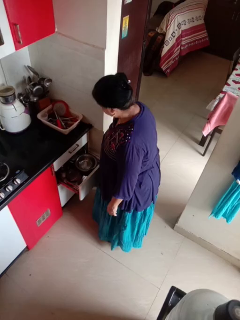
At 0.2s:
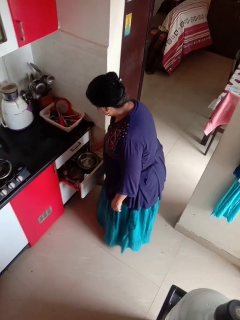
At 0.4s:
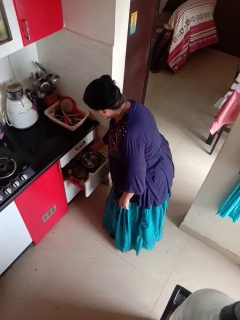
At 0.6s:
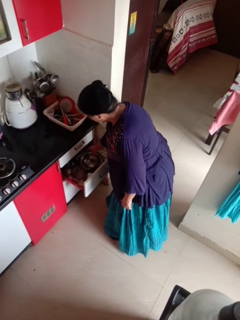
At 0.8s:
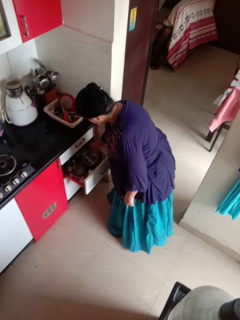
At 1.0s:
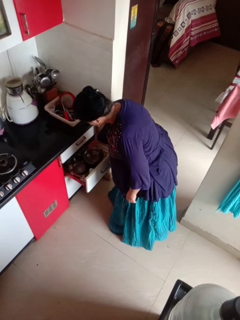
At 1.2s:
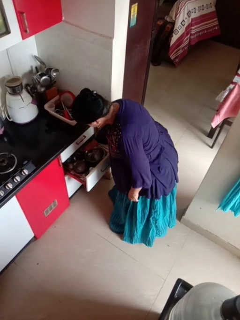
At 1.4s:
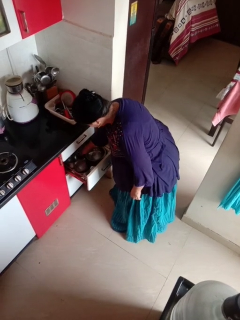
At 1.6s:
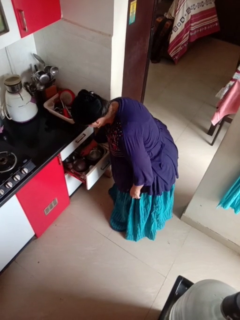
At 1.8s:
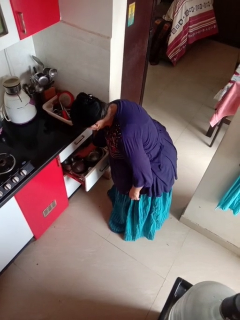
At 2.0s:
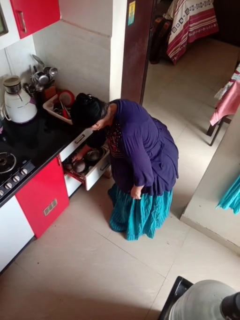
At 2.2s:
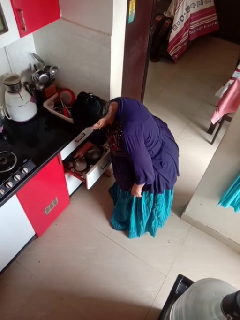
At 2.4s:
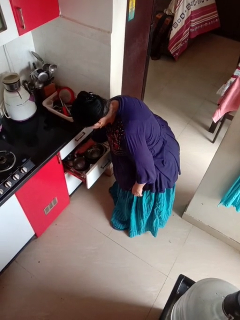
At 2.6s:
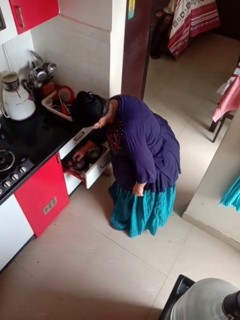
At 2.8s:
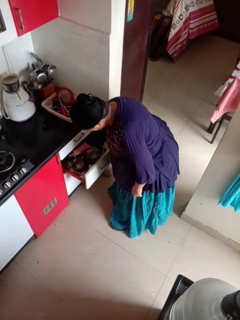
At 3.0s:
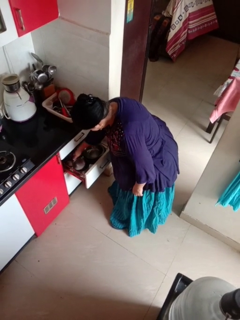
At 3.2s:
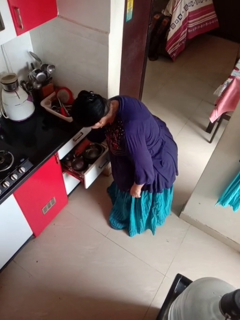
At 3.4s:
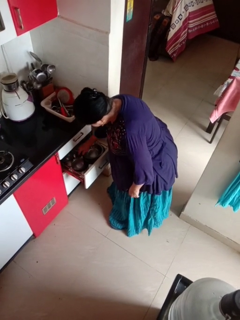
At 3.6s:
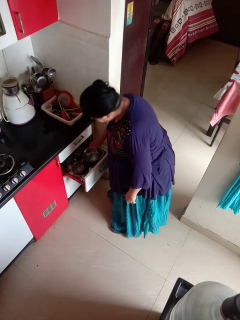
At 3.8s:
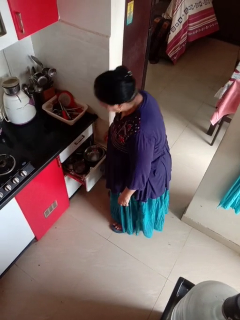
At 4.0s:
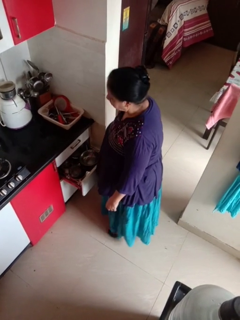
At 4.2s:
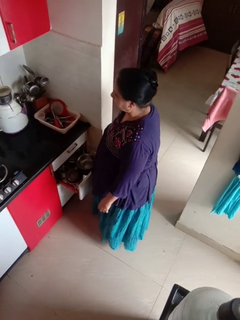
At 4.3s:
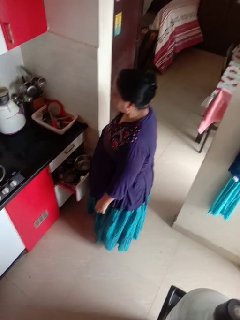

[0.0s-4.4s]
person searches in kitchen drawer

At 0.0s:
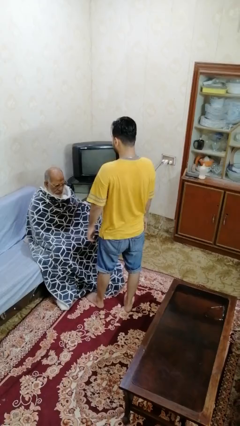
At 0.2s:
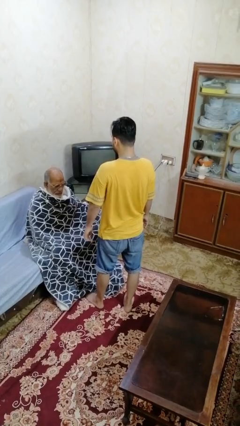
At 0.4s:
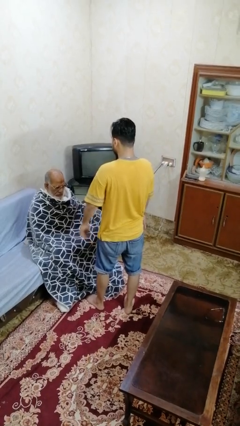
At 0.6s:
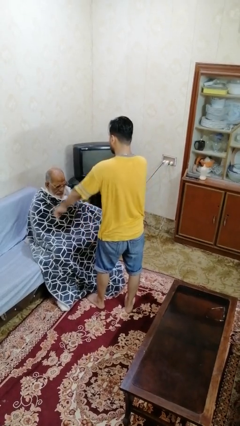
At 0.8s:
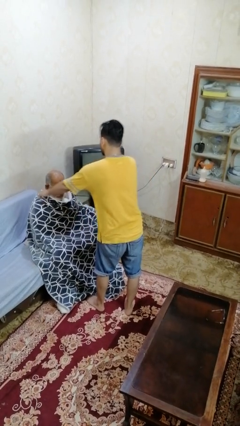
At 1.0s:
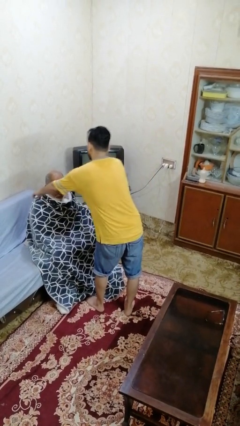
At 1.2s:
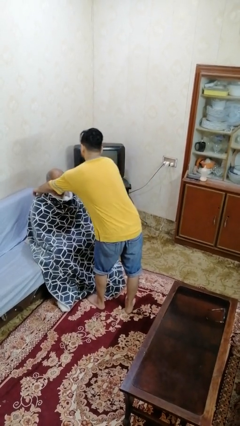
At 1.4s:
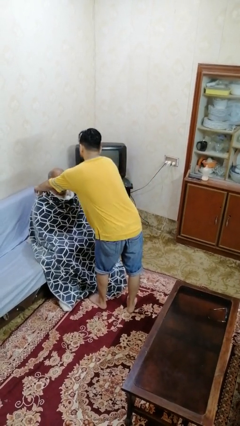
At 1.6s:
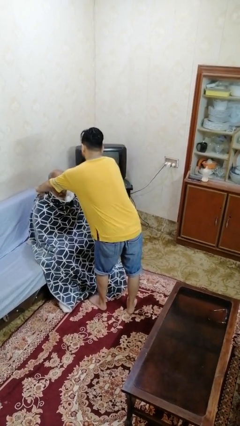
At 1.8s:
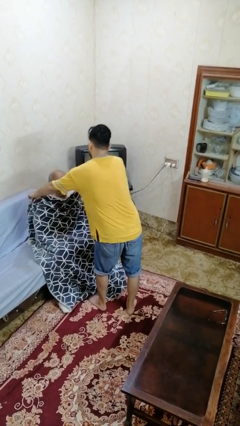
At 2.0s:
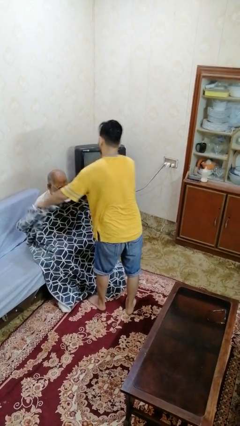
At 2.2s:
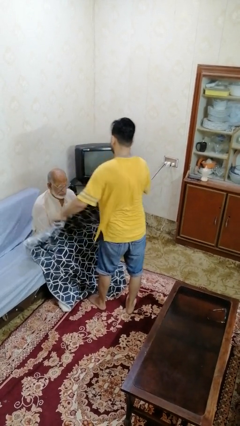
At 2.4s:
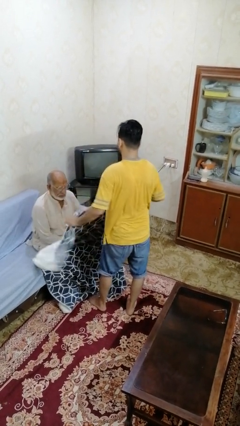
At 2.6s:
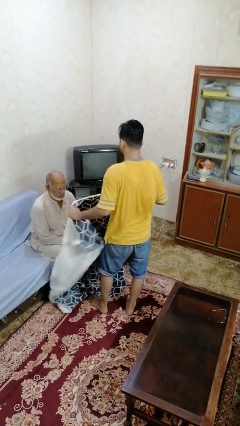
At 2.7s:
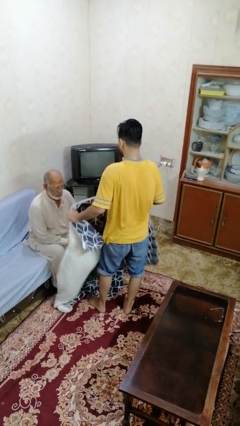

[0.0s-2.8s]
person uncovers friend with blanket

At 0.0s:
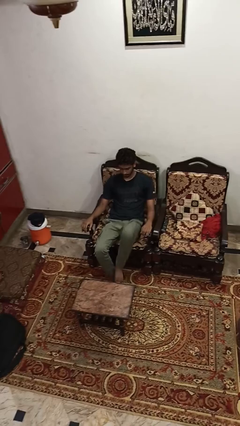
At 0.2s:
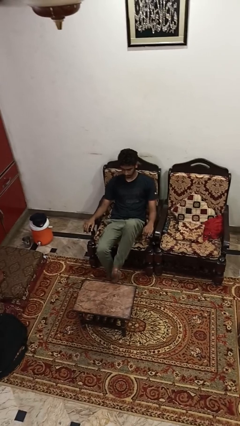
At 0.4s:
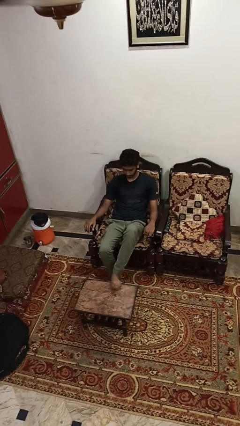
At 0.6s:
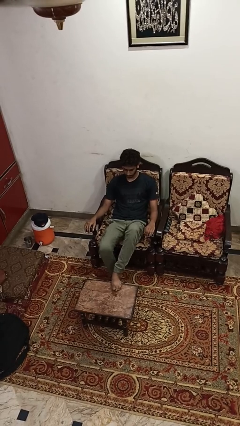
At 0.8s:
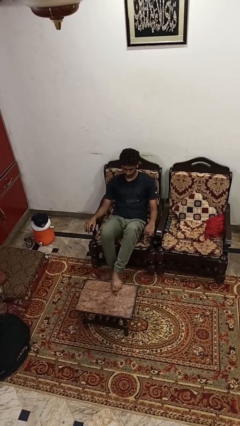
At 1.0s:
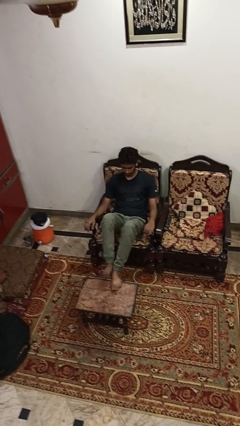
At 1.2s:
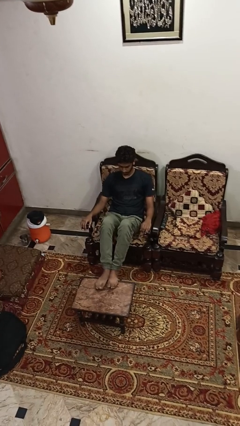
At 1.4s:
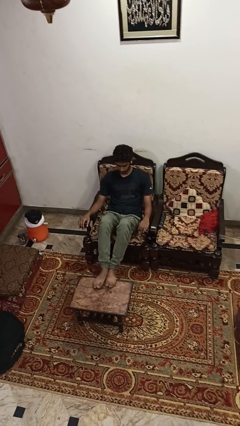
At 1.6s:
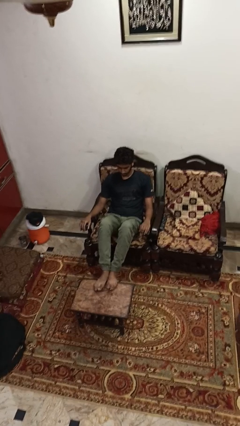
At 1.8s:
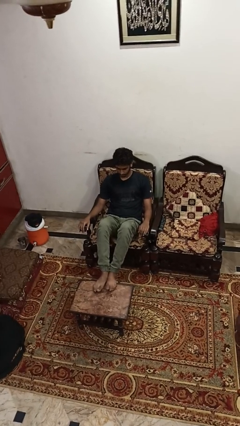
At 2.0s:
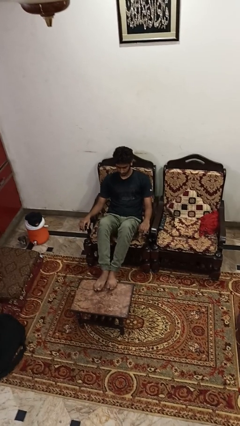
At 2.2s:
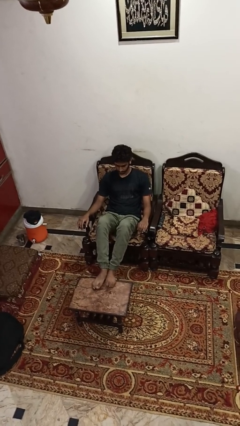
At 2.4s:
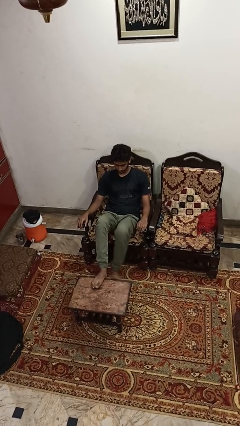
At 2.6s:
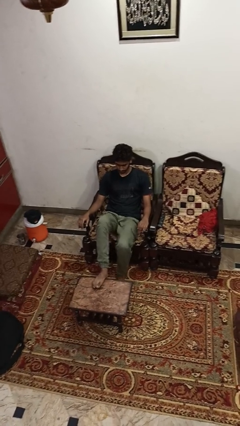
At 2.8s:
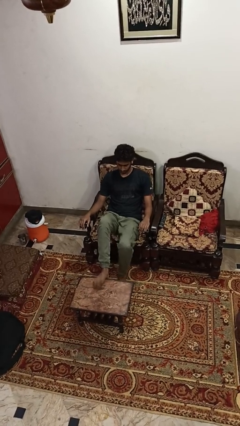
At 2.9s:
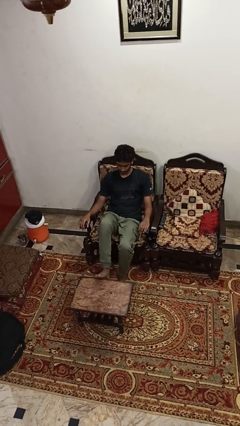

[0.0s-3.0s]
person puts feet up

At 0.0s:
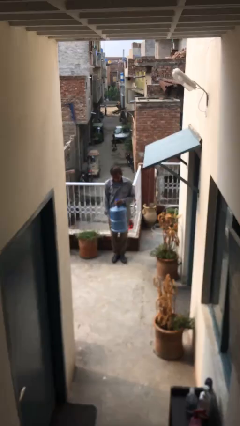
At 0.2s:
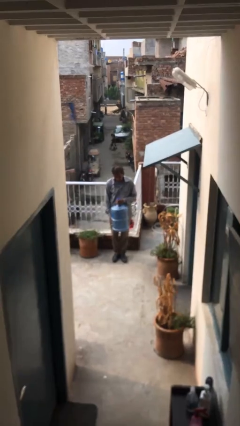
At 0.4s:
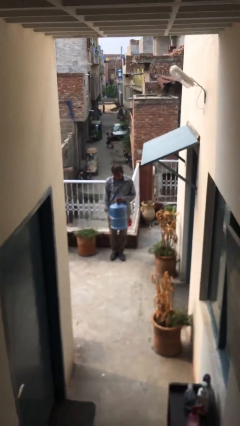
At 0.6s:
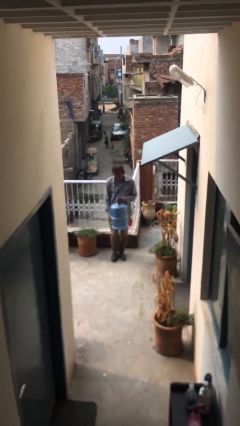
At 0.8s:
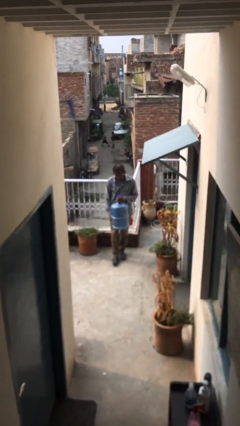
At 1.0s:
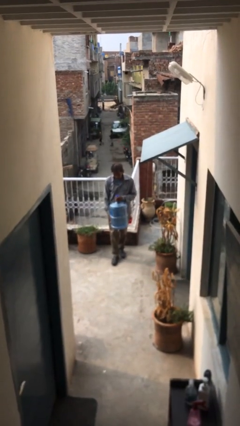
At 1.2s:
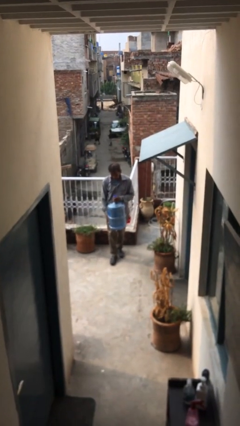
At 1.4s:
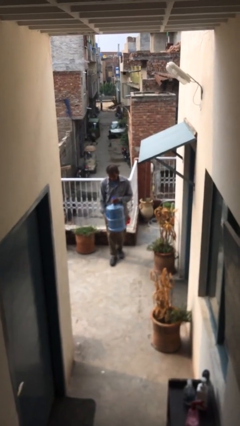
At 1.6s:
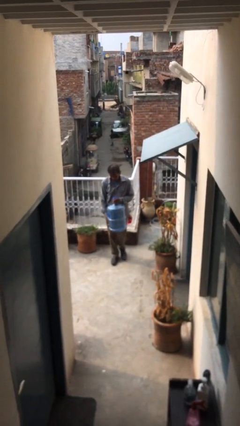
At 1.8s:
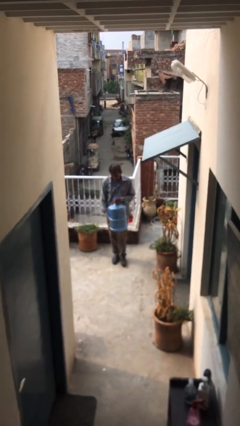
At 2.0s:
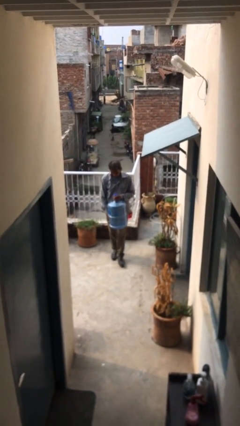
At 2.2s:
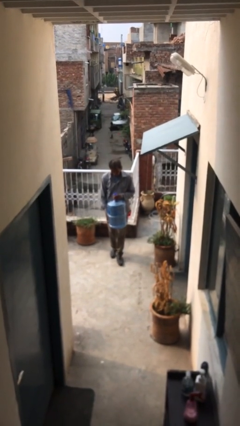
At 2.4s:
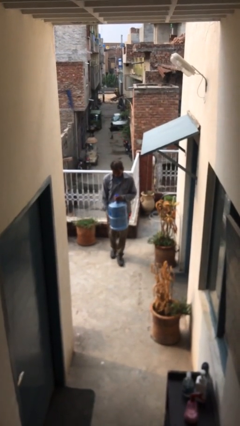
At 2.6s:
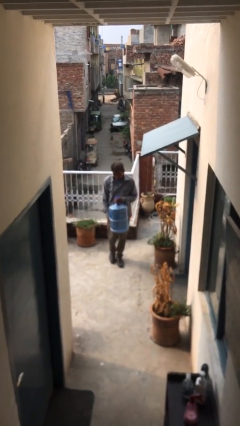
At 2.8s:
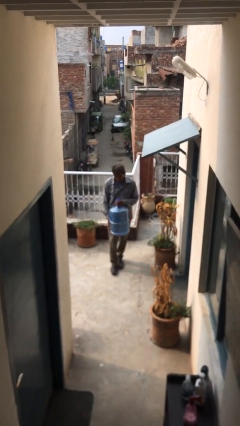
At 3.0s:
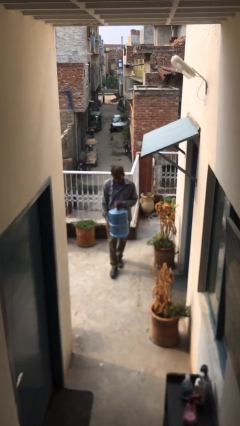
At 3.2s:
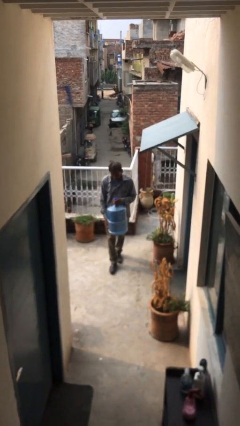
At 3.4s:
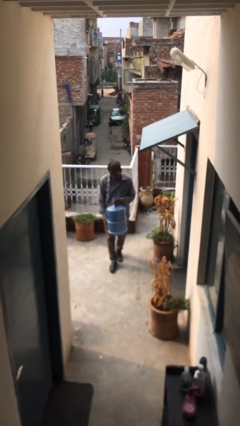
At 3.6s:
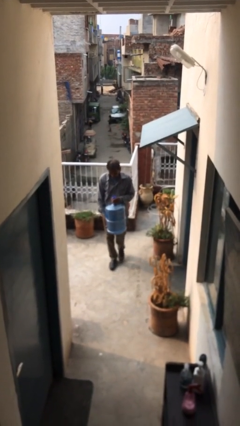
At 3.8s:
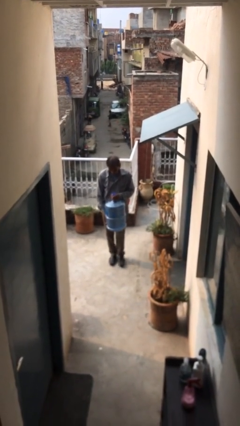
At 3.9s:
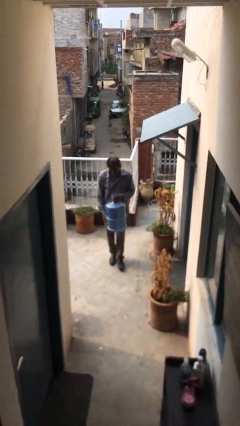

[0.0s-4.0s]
person carries heavy object

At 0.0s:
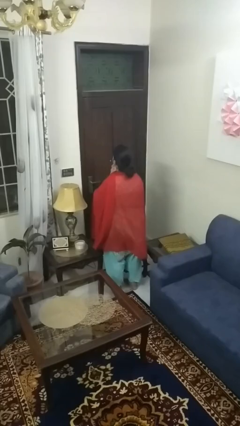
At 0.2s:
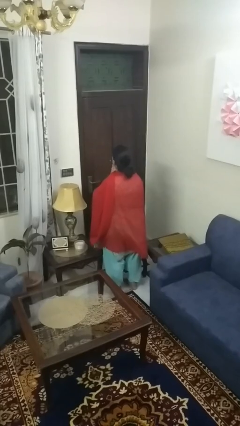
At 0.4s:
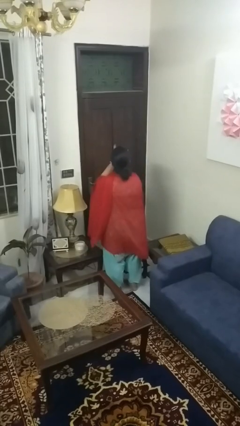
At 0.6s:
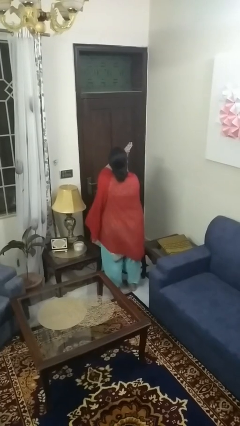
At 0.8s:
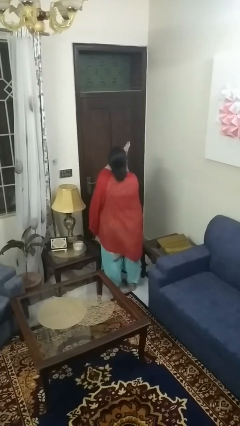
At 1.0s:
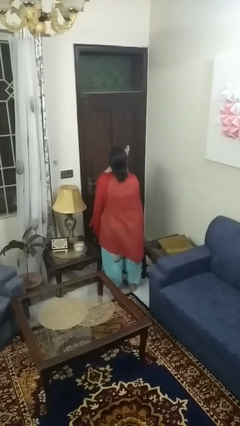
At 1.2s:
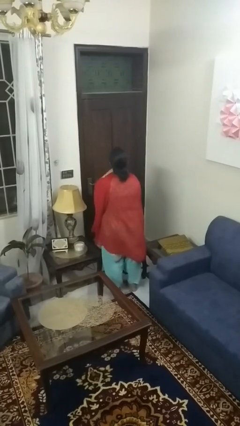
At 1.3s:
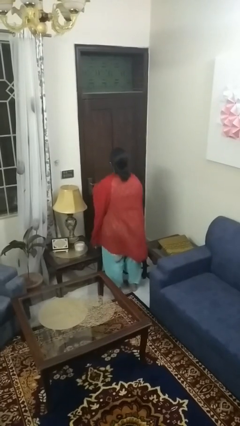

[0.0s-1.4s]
person swats bug

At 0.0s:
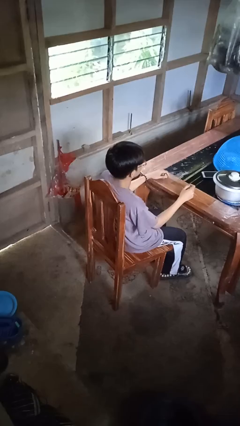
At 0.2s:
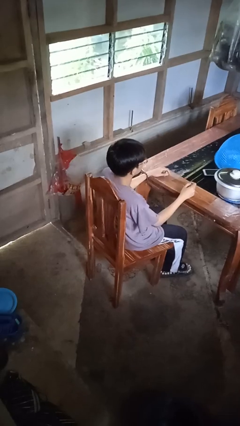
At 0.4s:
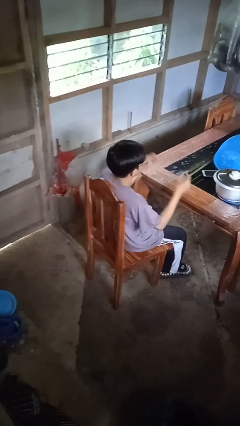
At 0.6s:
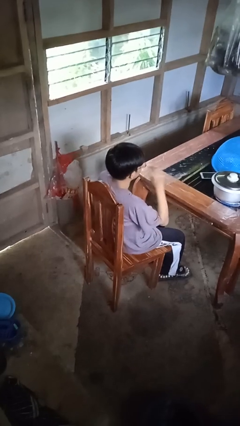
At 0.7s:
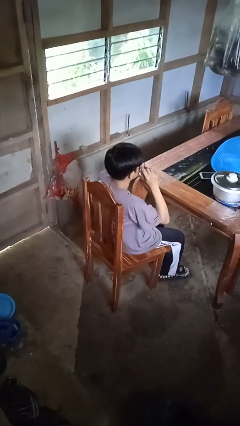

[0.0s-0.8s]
person takes off glasses

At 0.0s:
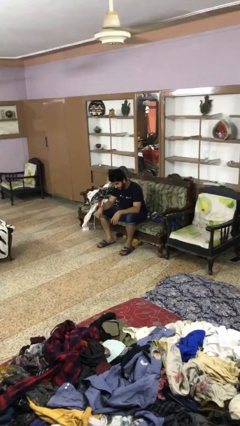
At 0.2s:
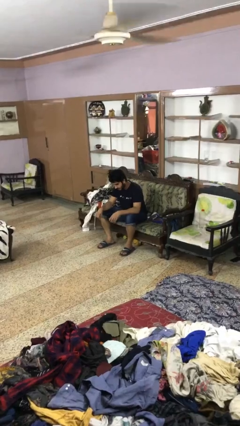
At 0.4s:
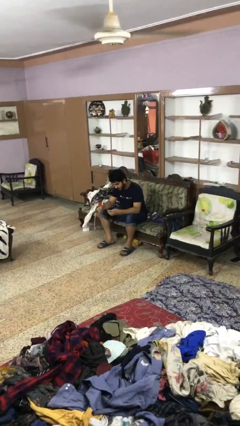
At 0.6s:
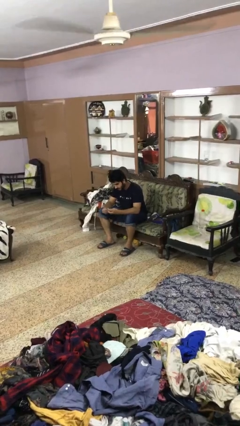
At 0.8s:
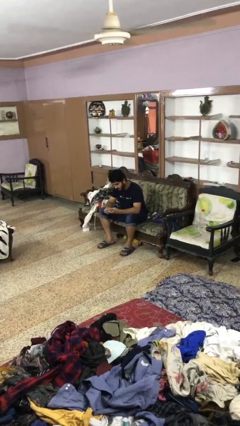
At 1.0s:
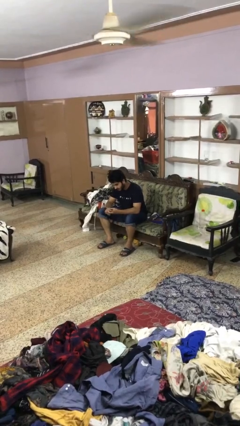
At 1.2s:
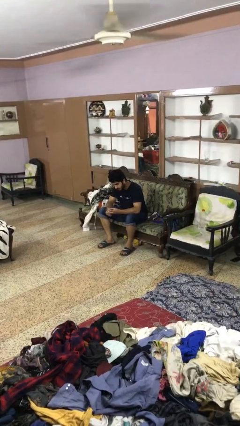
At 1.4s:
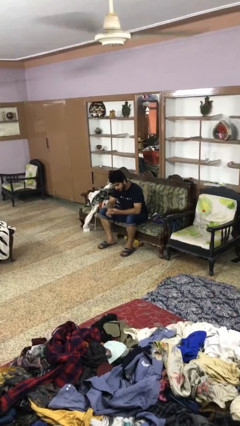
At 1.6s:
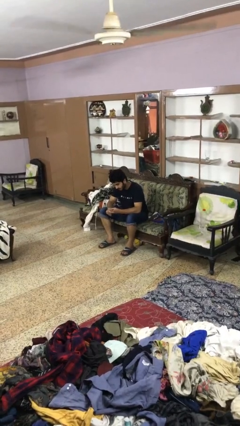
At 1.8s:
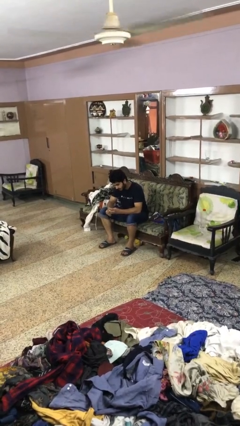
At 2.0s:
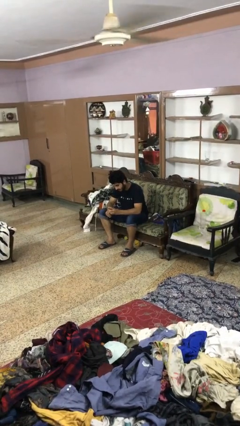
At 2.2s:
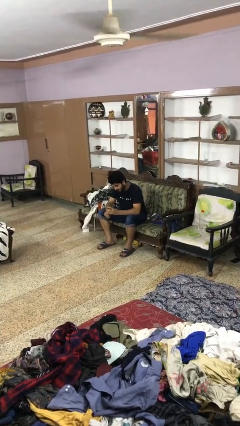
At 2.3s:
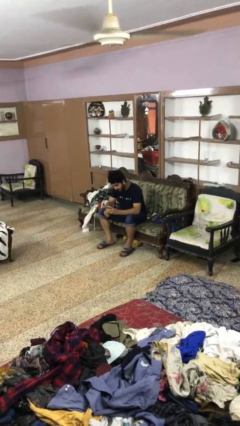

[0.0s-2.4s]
person files fingernails
